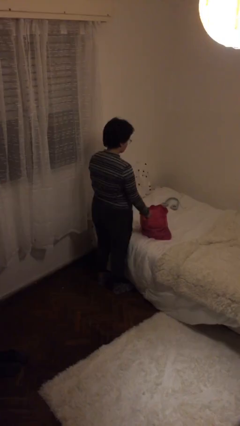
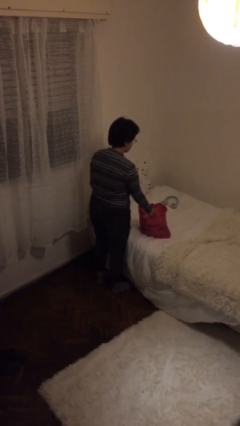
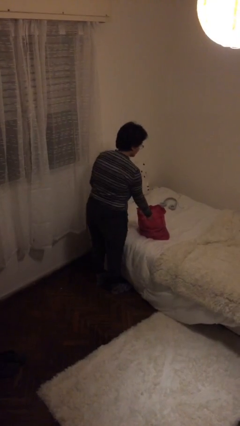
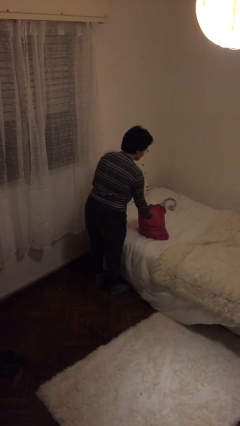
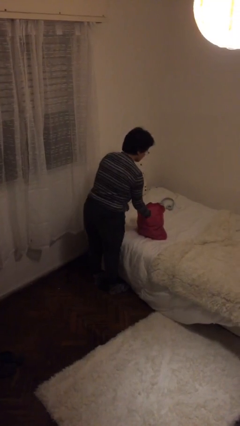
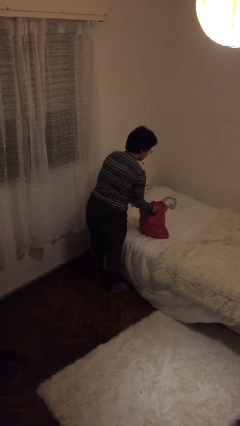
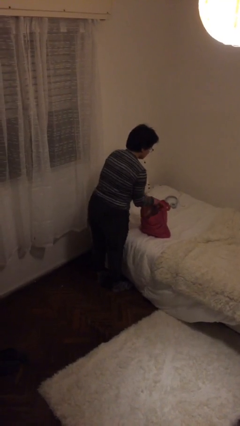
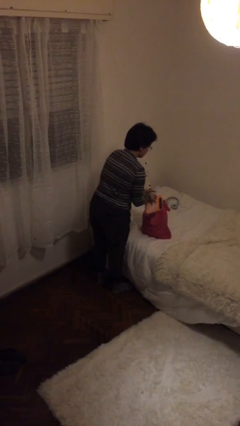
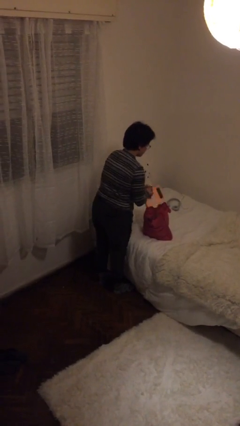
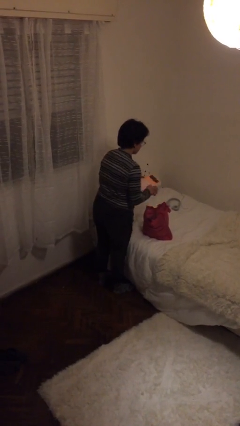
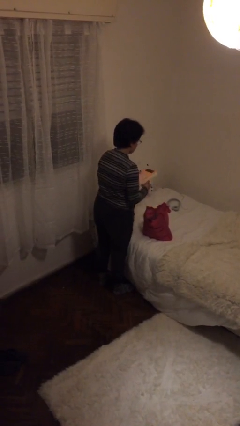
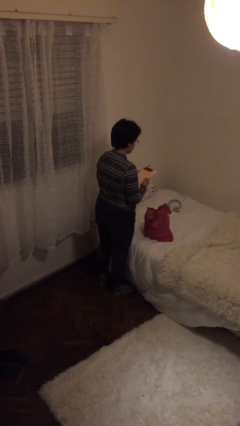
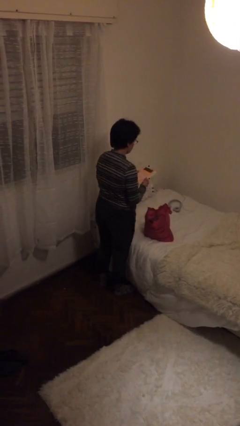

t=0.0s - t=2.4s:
person takes object from bag

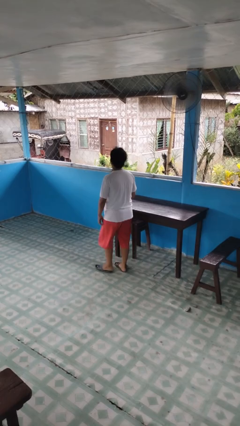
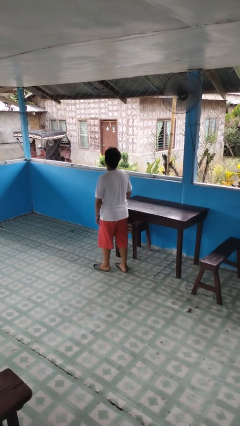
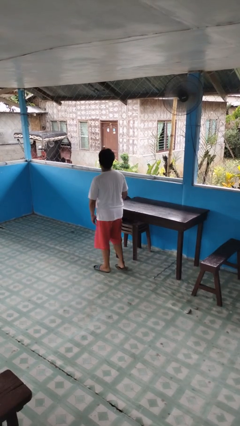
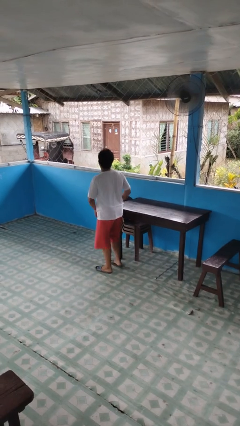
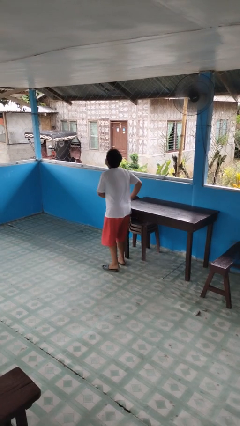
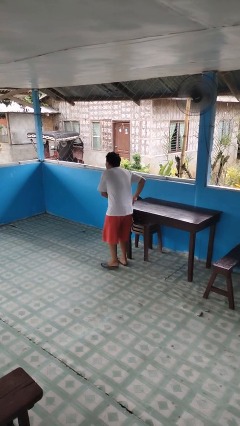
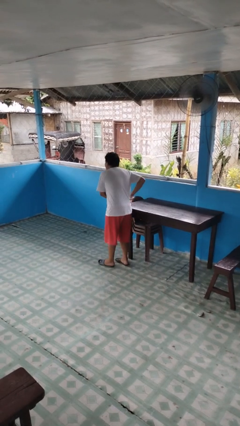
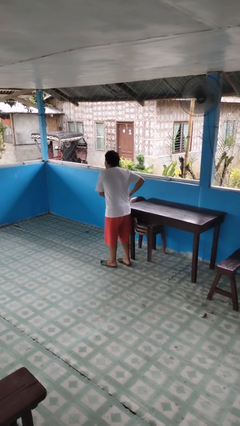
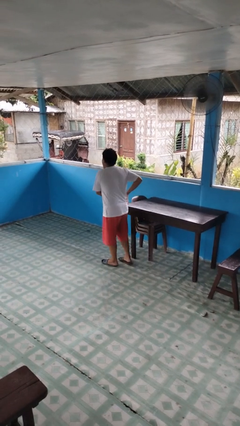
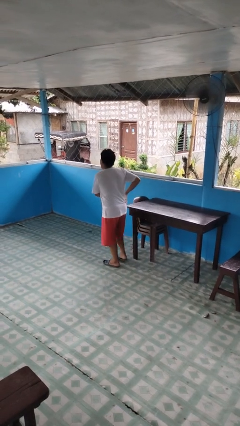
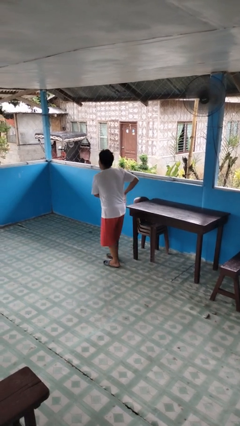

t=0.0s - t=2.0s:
person bumps into table

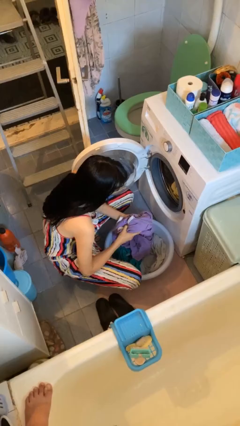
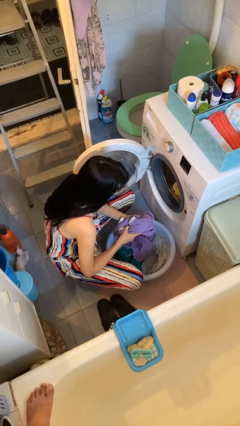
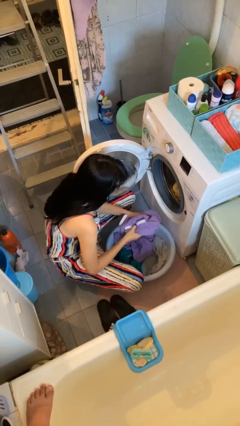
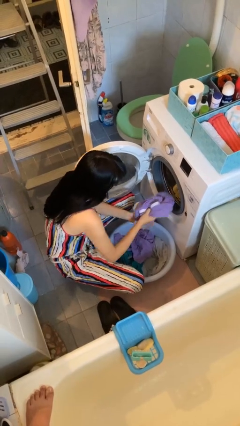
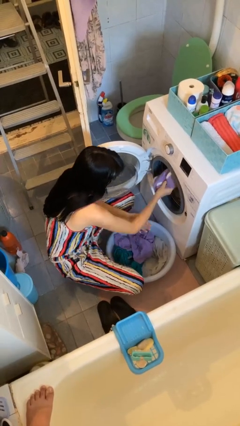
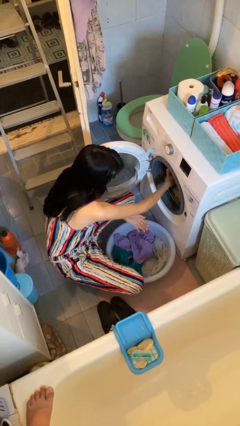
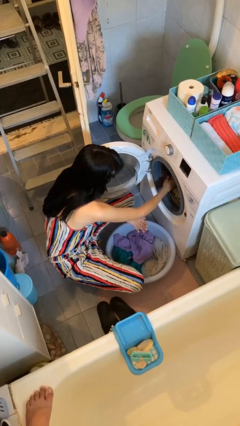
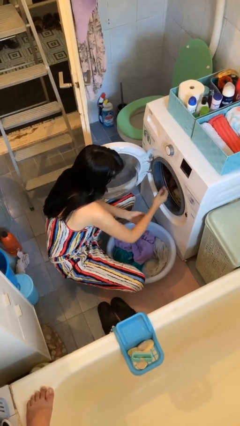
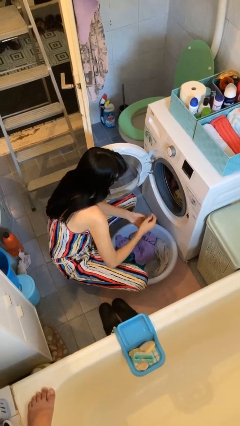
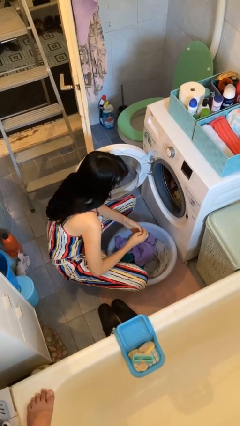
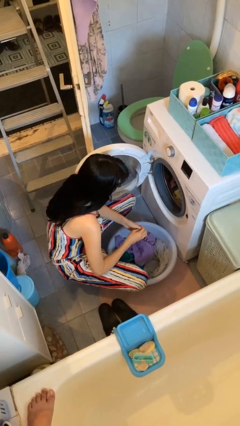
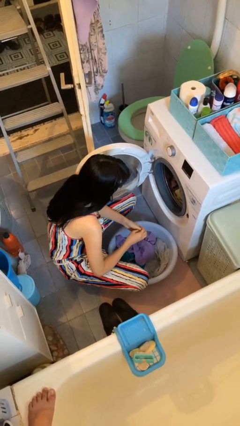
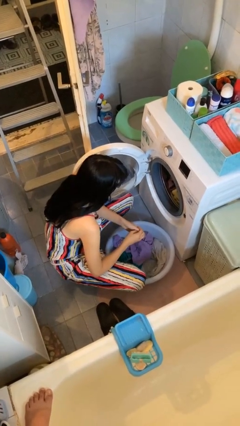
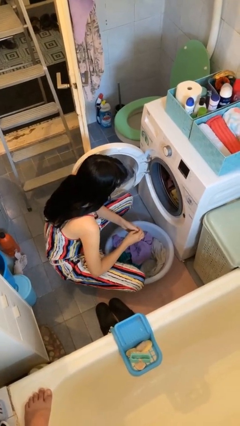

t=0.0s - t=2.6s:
person unloads clotheswasher

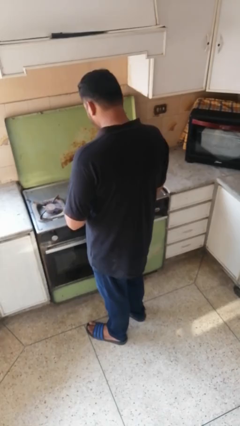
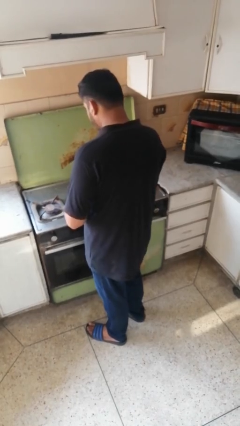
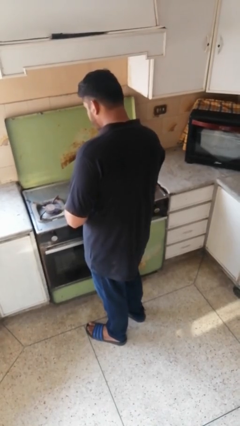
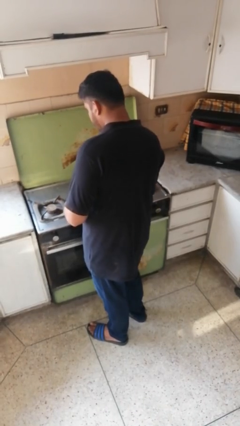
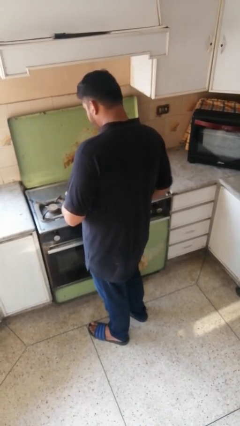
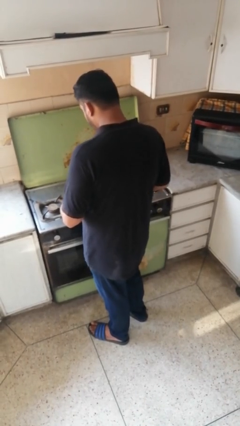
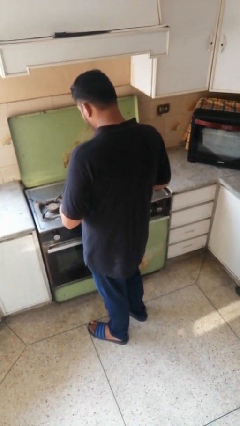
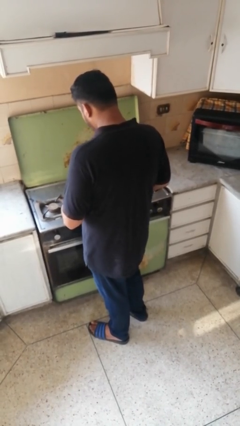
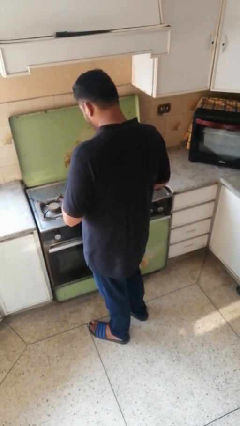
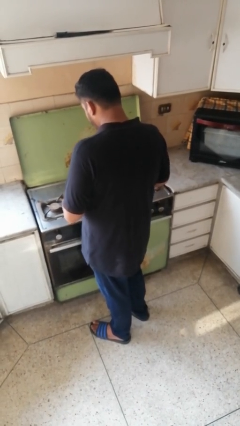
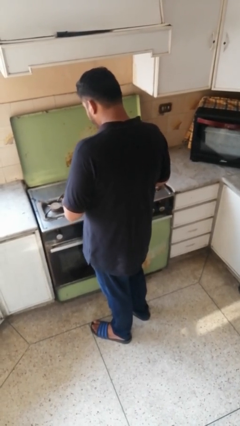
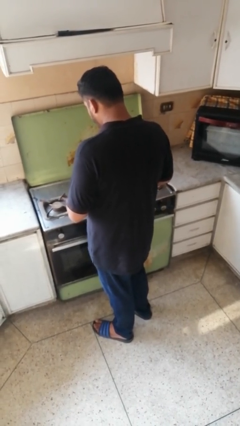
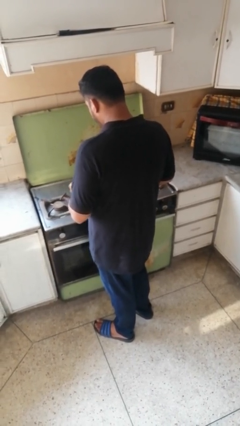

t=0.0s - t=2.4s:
person turns off stovetop

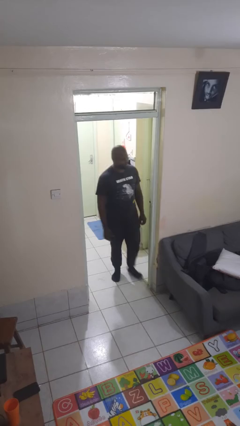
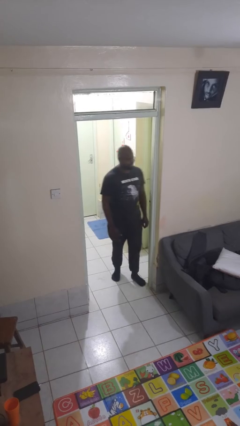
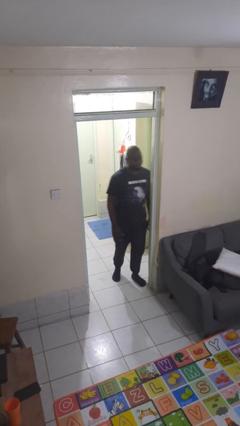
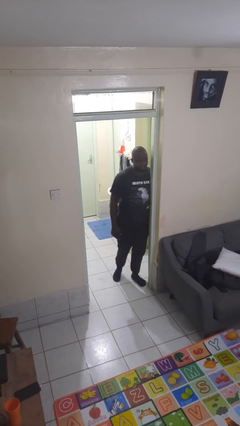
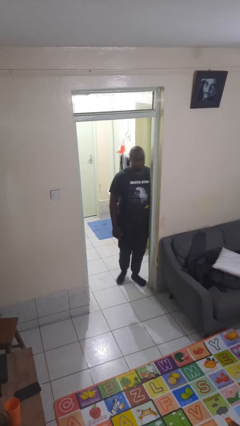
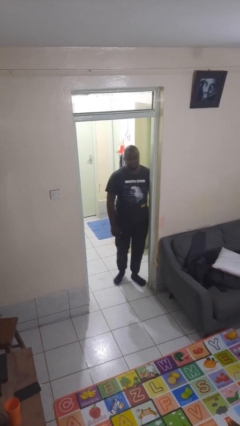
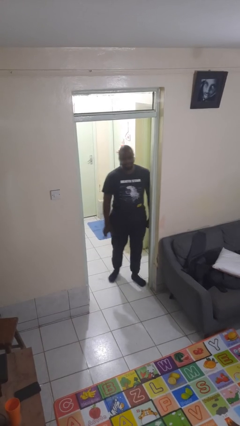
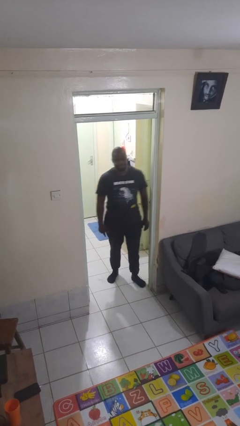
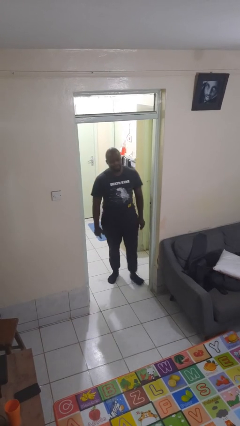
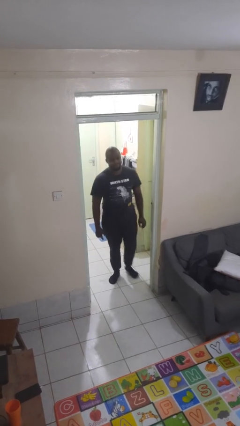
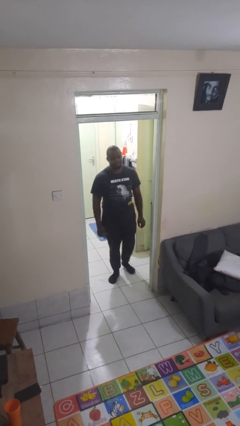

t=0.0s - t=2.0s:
person bumps into wall

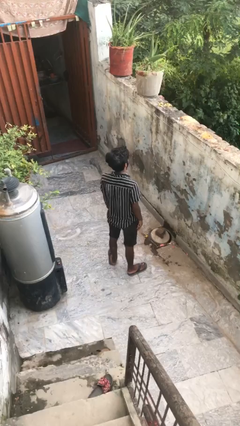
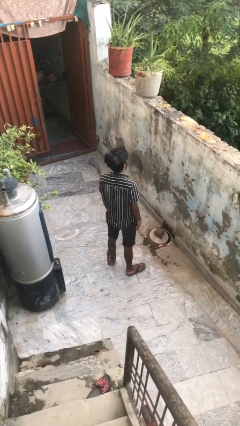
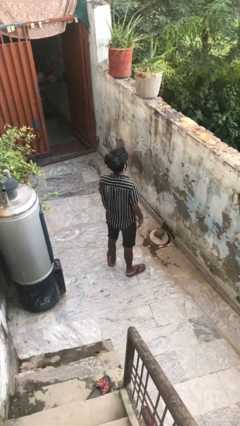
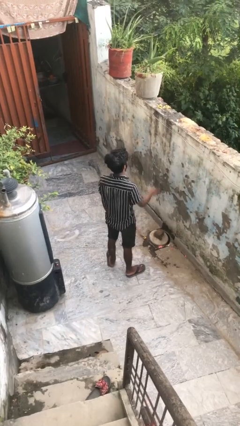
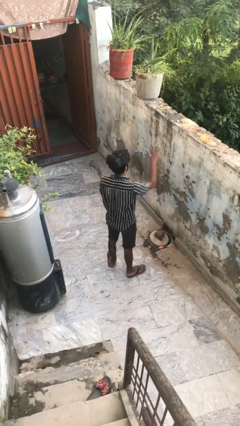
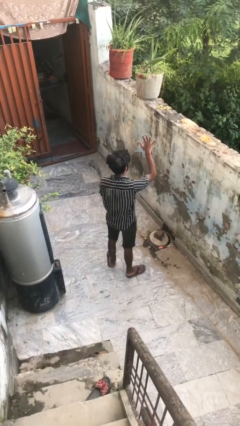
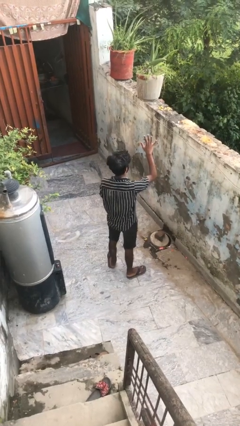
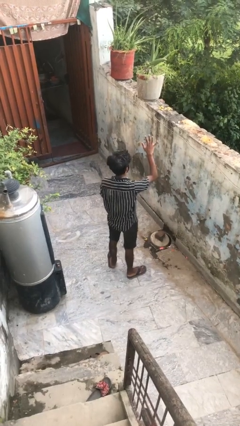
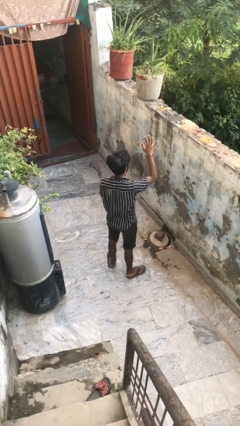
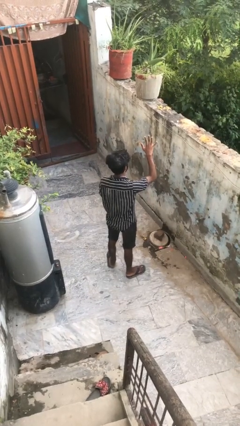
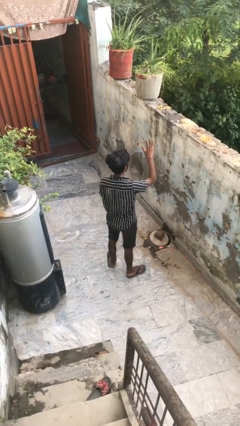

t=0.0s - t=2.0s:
person gestures number five

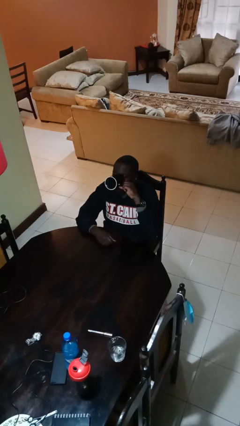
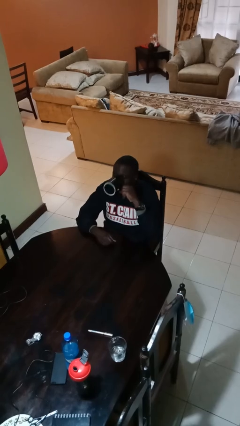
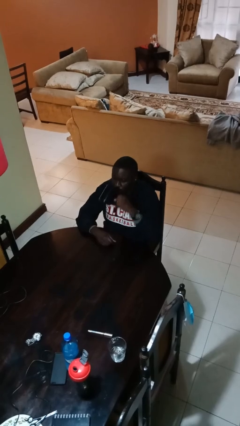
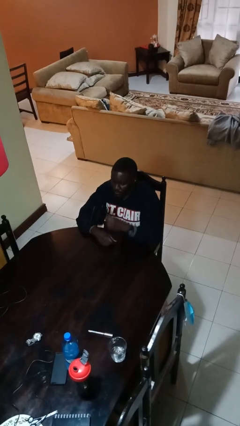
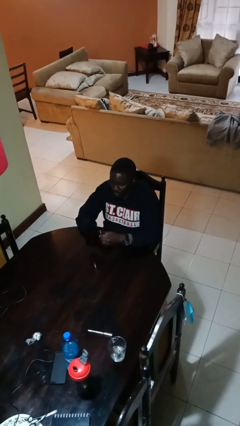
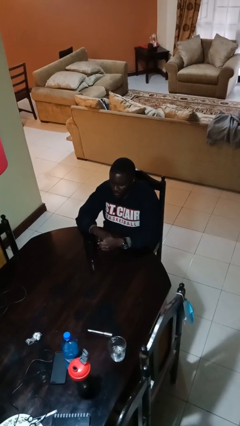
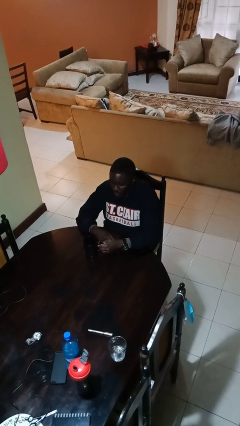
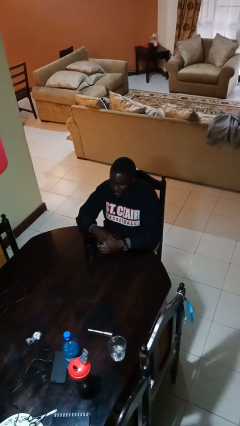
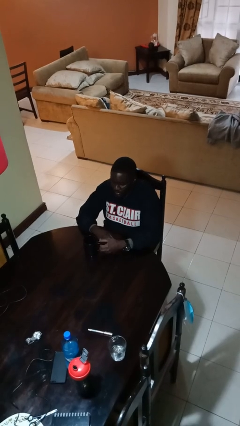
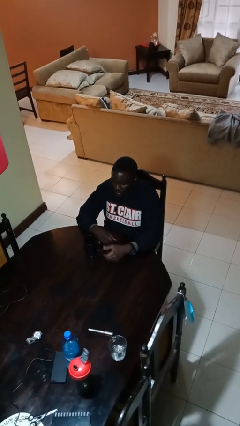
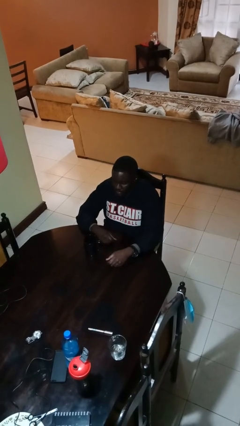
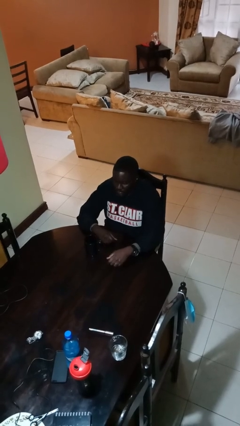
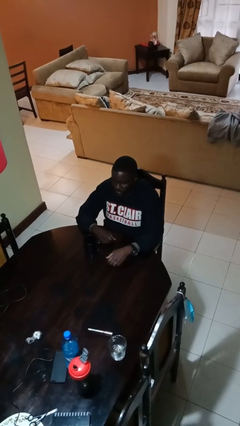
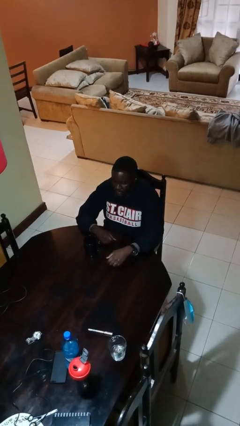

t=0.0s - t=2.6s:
person puts down object on table

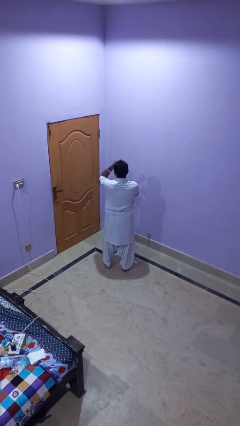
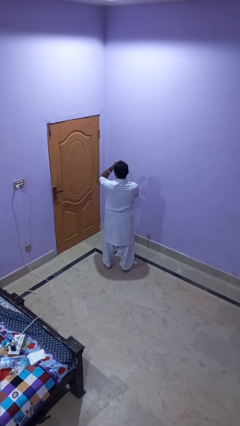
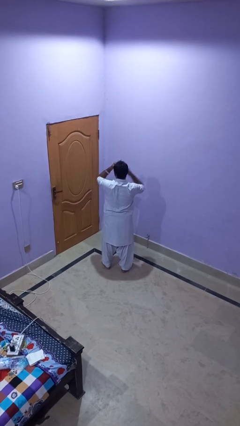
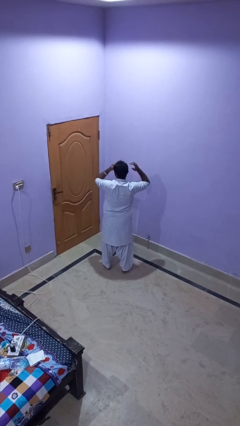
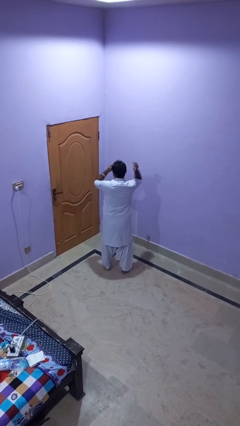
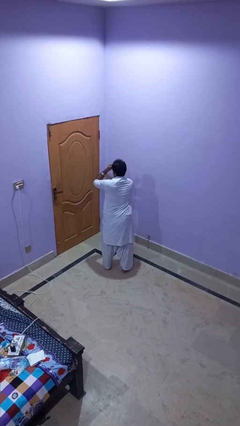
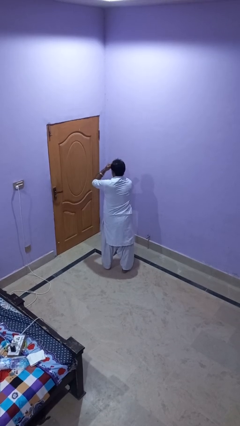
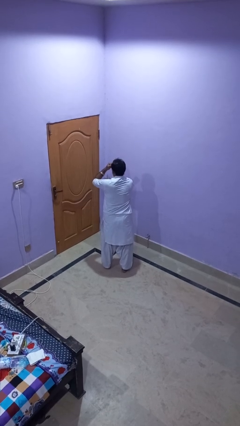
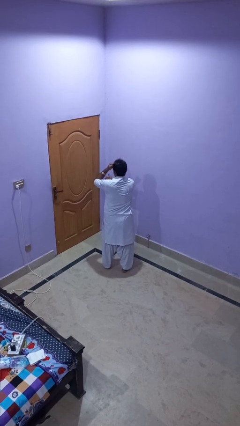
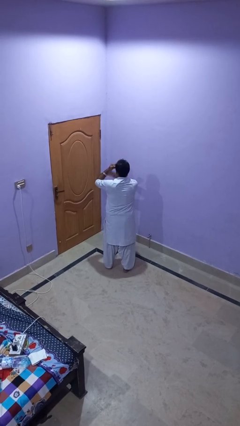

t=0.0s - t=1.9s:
person karate chop
